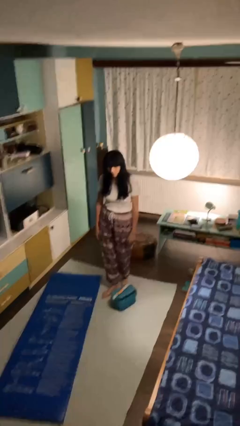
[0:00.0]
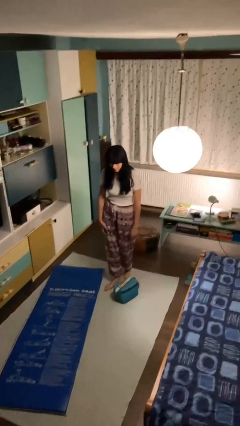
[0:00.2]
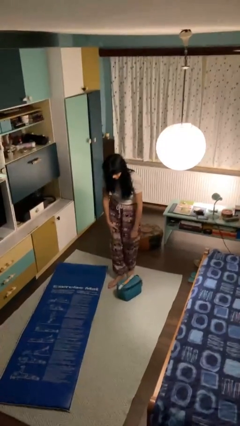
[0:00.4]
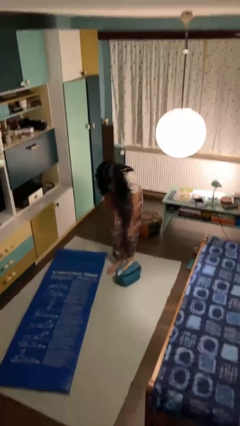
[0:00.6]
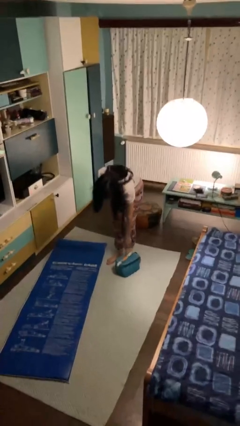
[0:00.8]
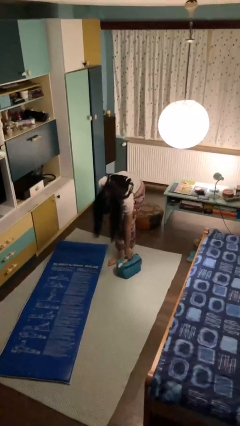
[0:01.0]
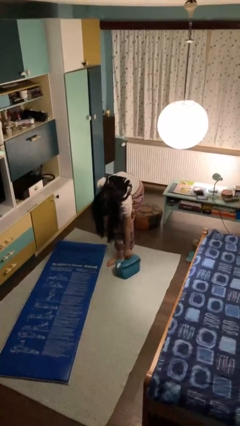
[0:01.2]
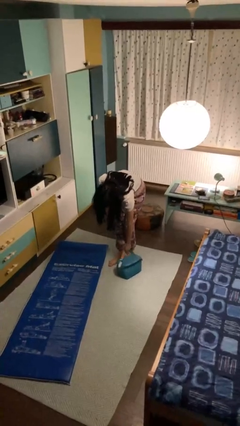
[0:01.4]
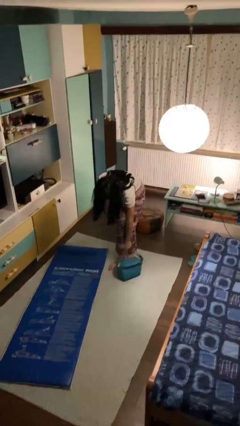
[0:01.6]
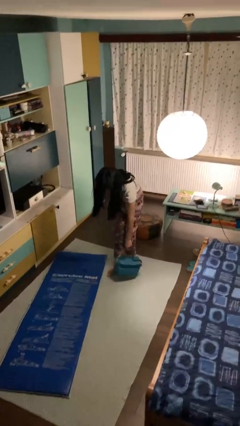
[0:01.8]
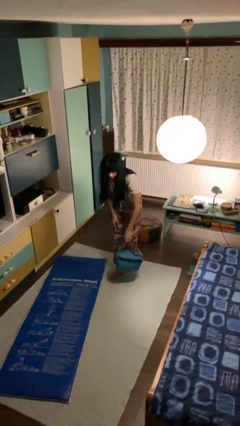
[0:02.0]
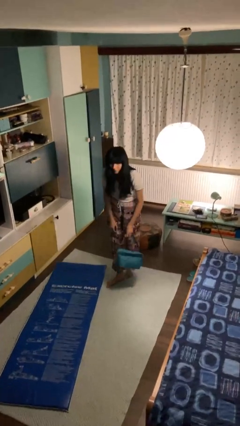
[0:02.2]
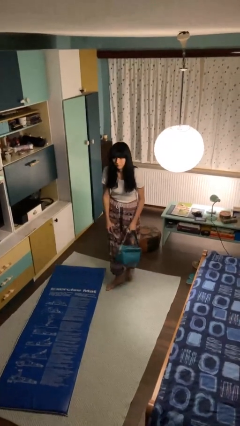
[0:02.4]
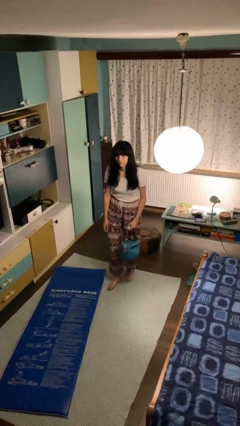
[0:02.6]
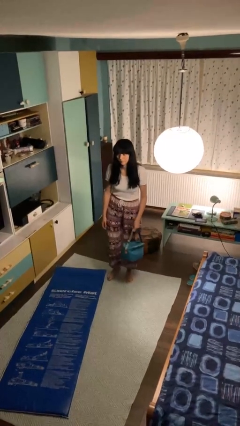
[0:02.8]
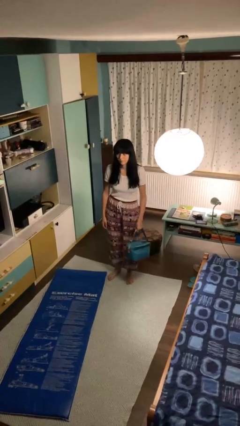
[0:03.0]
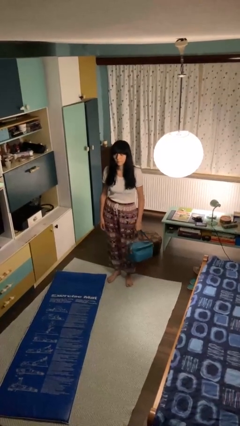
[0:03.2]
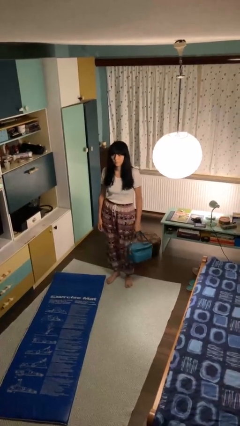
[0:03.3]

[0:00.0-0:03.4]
person picks up object from floor

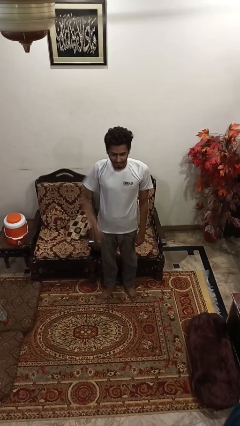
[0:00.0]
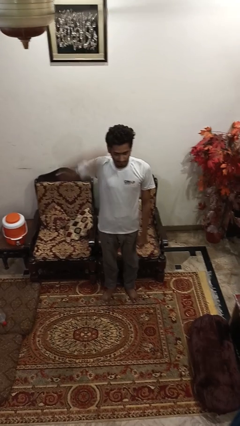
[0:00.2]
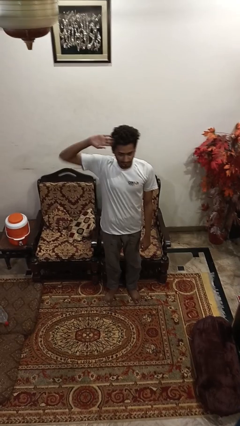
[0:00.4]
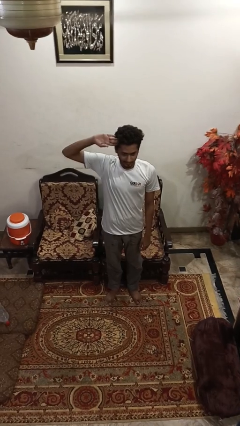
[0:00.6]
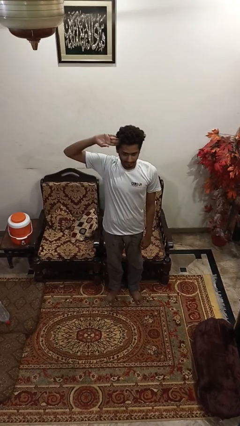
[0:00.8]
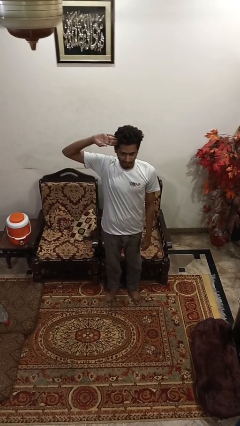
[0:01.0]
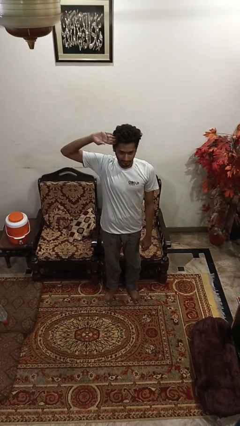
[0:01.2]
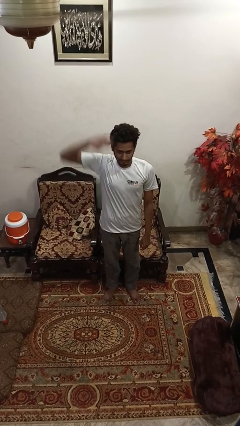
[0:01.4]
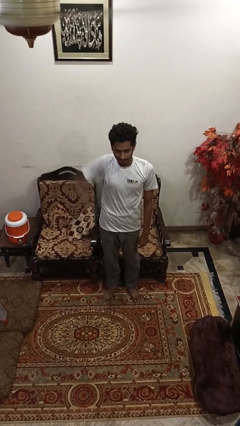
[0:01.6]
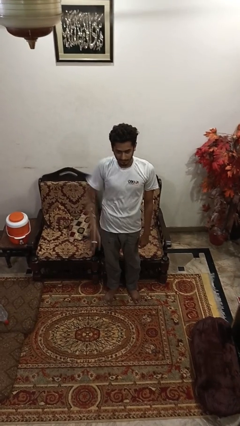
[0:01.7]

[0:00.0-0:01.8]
person salutes

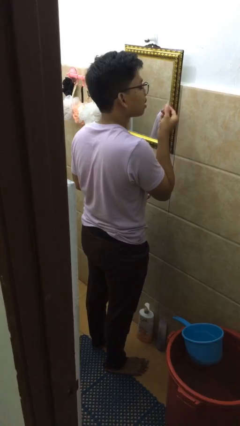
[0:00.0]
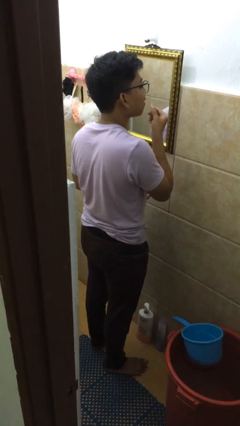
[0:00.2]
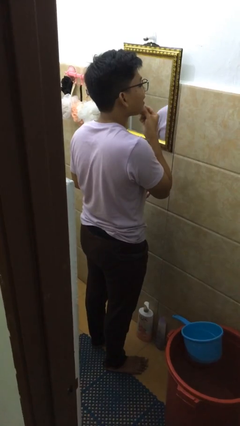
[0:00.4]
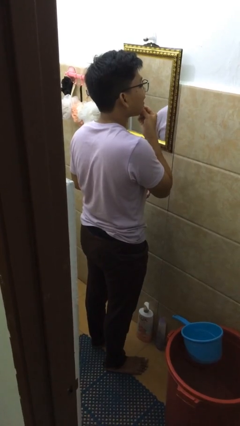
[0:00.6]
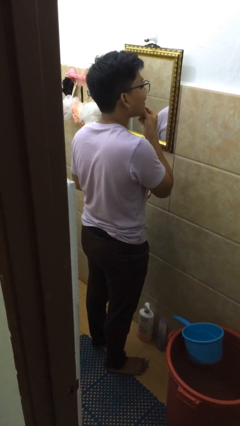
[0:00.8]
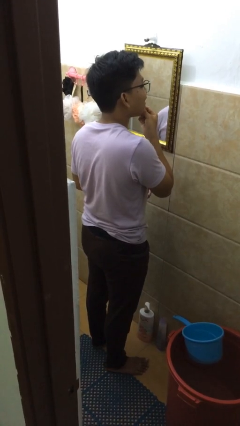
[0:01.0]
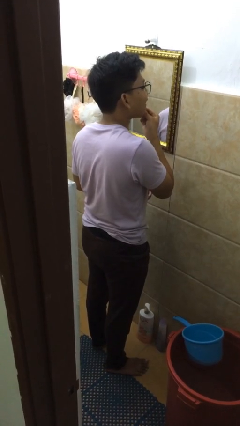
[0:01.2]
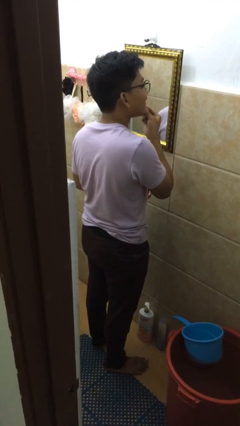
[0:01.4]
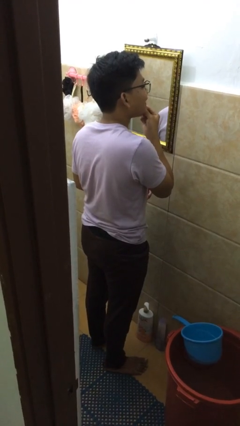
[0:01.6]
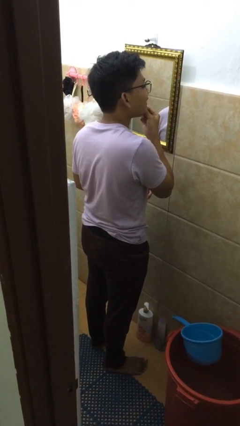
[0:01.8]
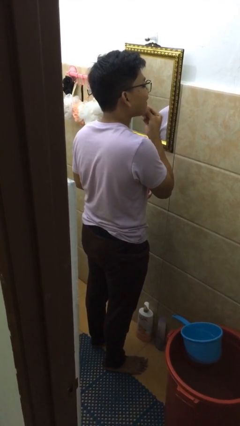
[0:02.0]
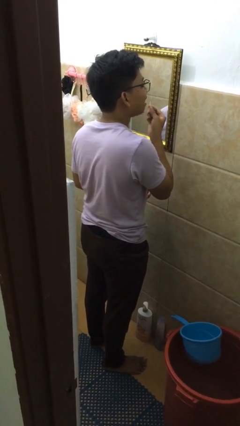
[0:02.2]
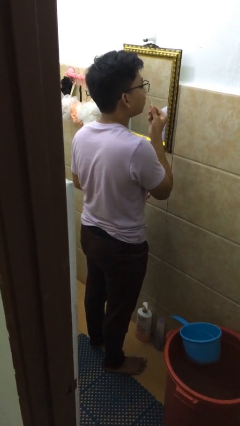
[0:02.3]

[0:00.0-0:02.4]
person flosses

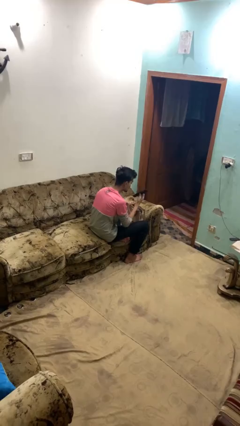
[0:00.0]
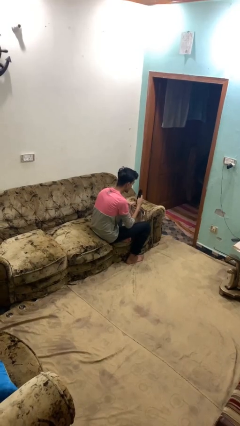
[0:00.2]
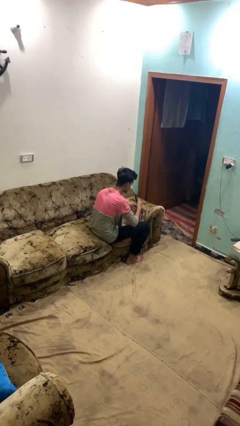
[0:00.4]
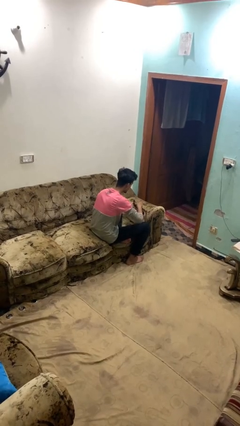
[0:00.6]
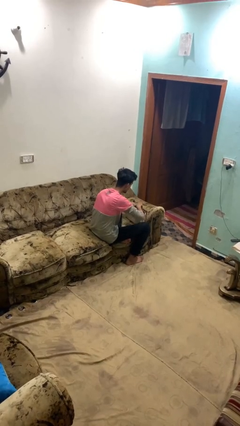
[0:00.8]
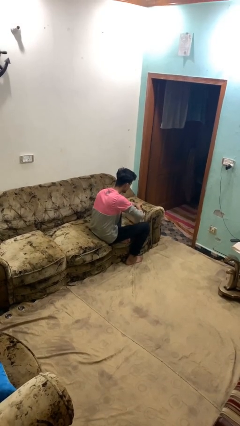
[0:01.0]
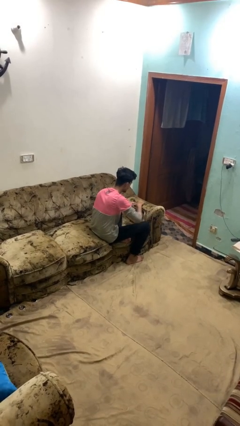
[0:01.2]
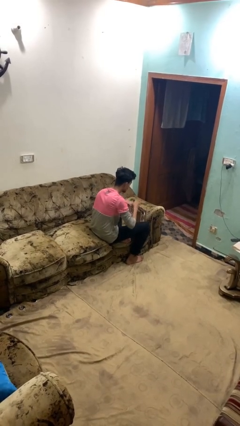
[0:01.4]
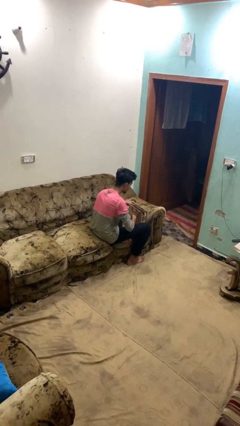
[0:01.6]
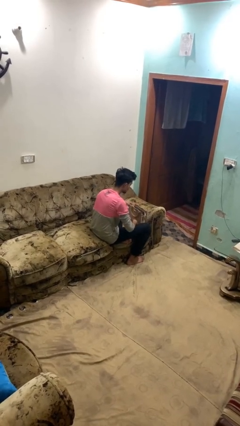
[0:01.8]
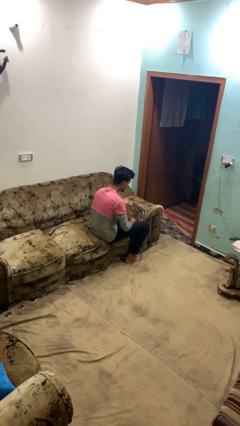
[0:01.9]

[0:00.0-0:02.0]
person puts object into purse

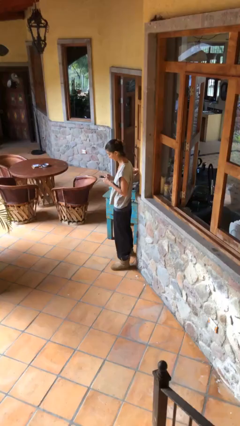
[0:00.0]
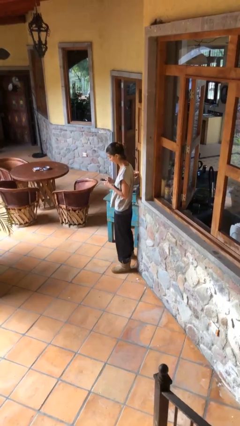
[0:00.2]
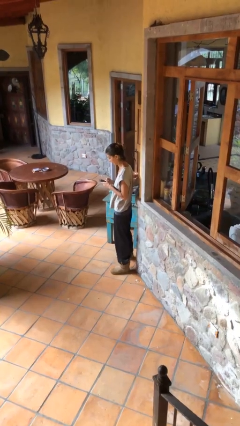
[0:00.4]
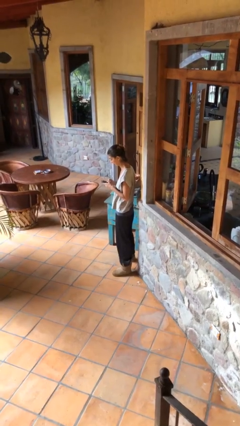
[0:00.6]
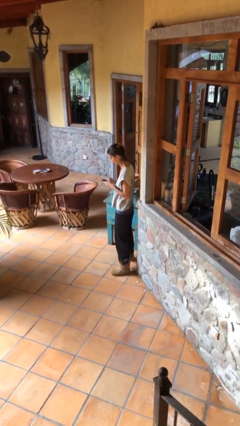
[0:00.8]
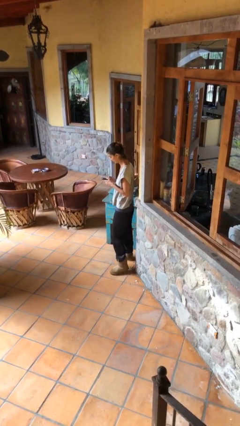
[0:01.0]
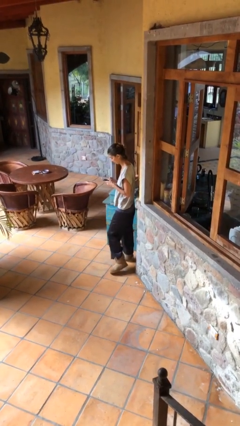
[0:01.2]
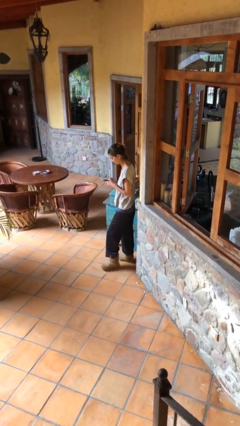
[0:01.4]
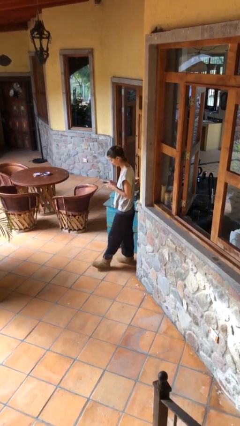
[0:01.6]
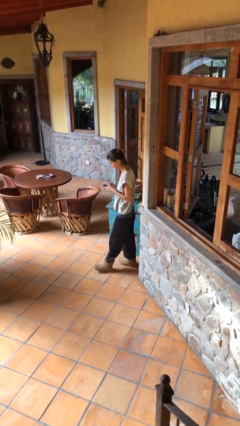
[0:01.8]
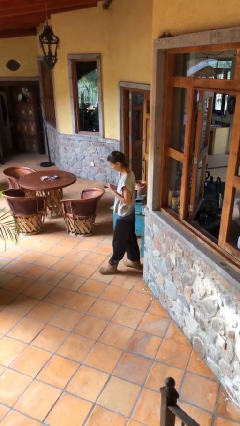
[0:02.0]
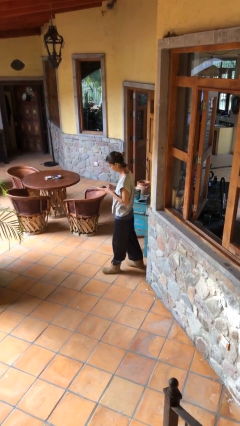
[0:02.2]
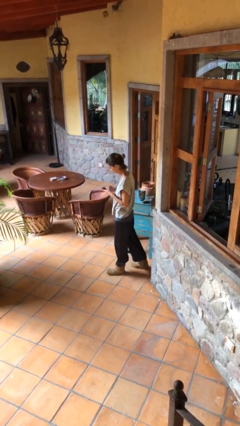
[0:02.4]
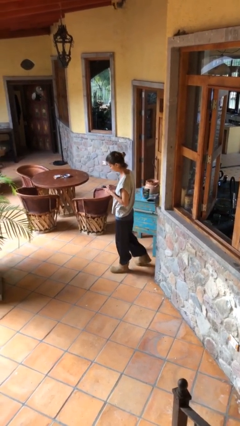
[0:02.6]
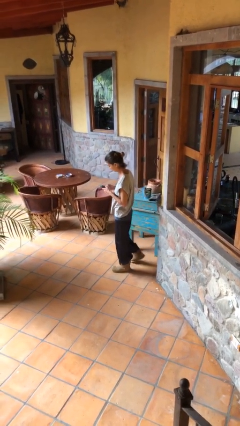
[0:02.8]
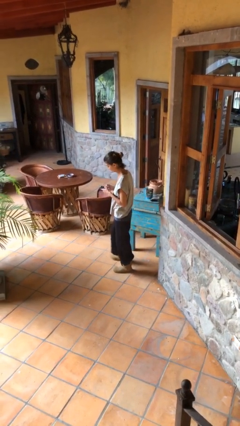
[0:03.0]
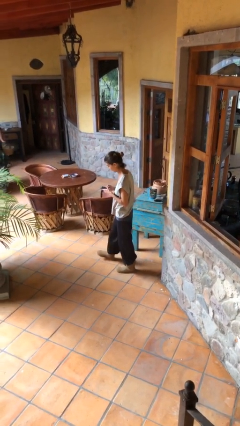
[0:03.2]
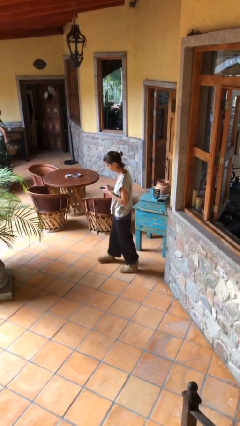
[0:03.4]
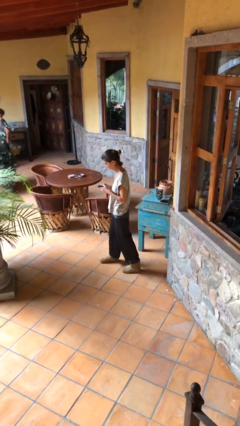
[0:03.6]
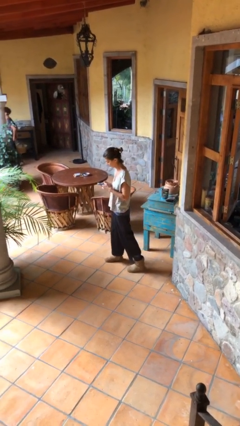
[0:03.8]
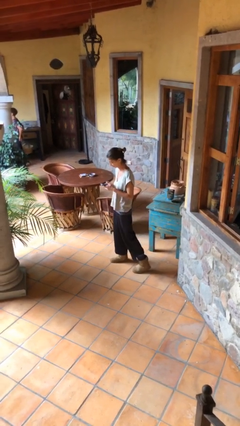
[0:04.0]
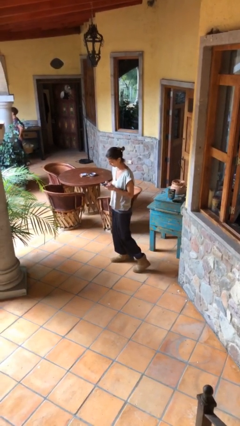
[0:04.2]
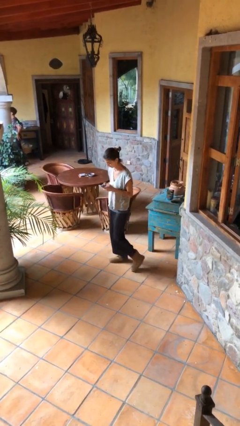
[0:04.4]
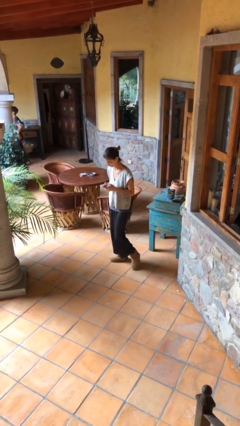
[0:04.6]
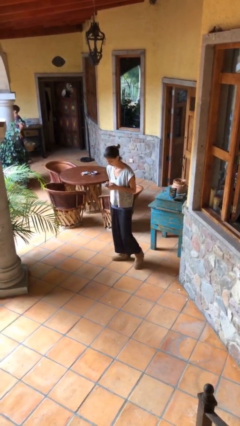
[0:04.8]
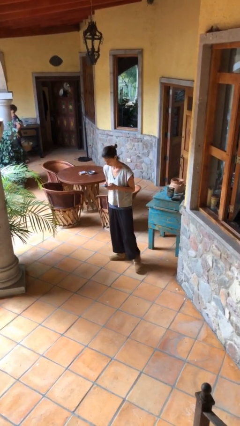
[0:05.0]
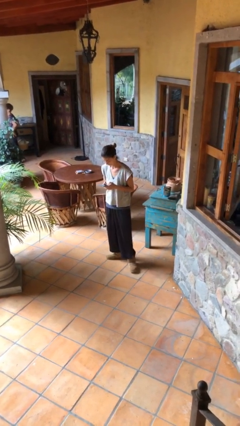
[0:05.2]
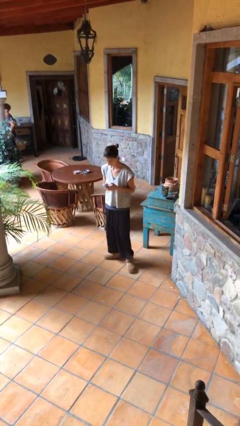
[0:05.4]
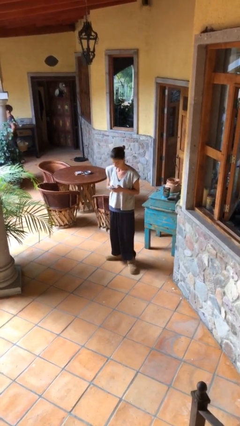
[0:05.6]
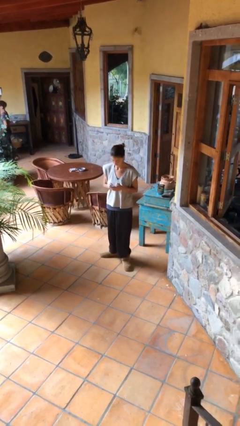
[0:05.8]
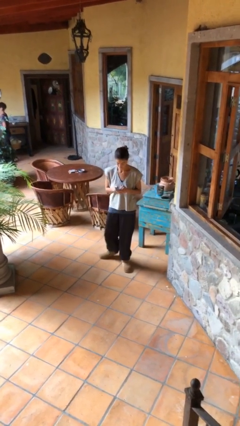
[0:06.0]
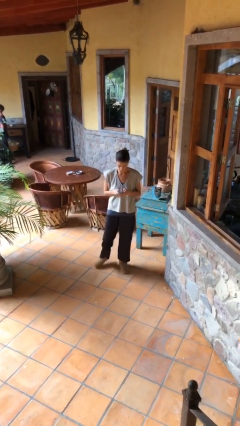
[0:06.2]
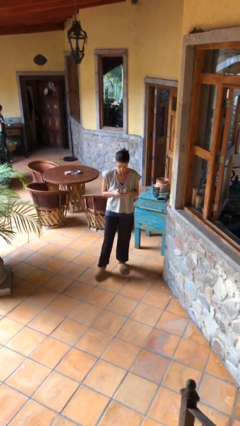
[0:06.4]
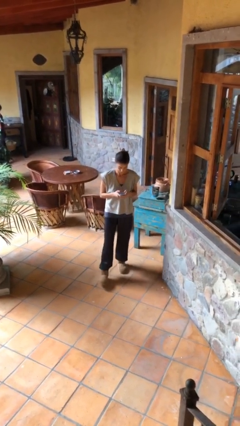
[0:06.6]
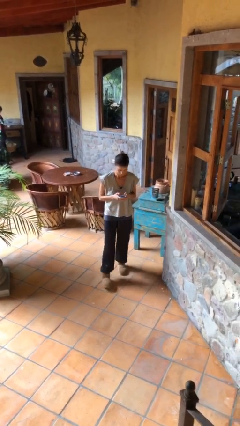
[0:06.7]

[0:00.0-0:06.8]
person texts on phone

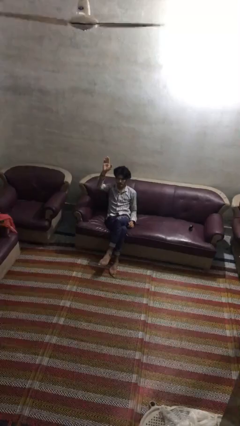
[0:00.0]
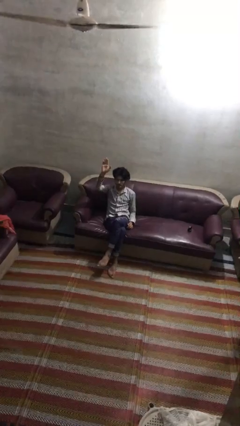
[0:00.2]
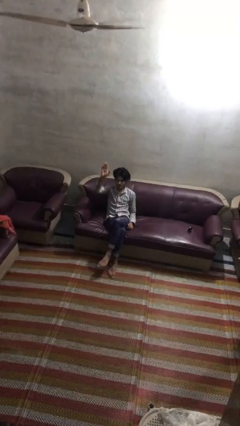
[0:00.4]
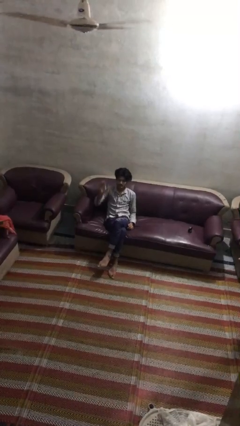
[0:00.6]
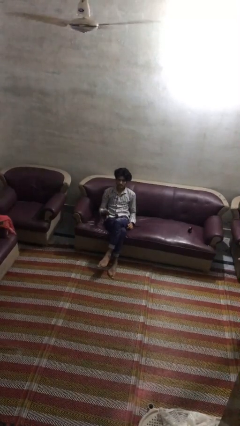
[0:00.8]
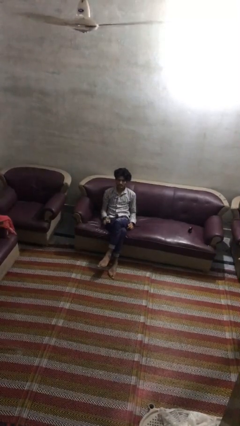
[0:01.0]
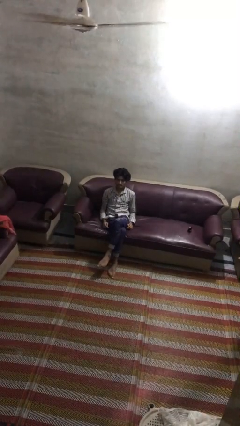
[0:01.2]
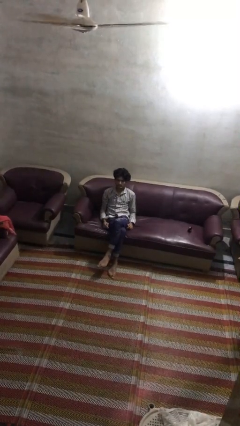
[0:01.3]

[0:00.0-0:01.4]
person gestures lower hand
